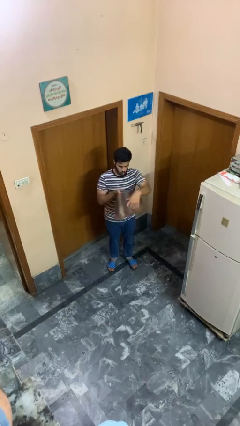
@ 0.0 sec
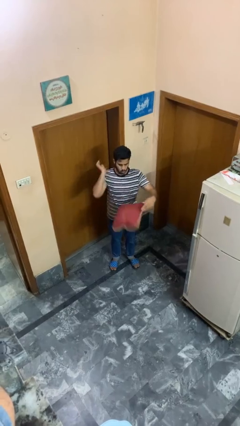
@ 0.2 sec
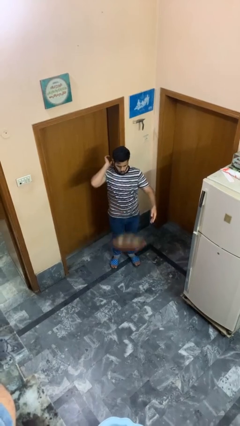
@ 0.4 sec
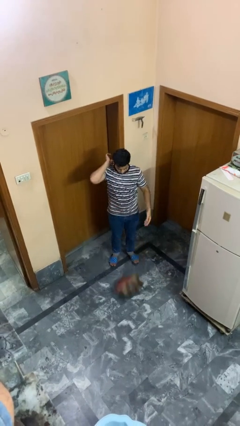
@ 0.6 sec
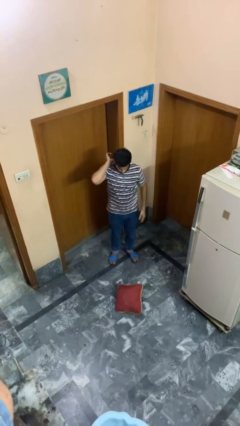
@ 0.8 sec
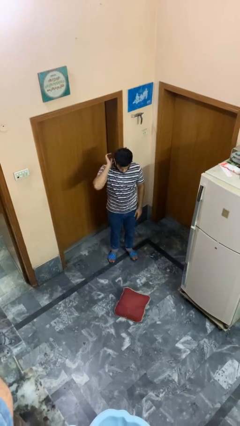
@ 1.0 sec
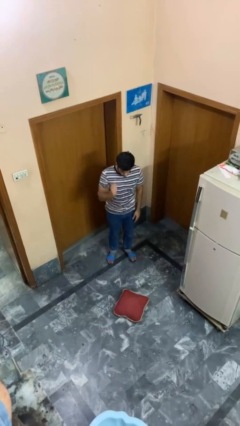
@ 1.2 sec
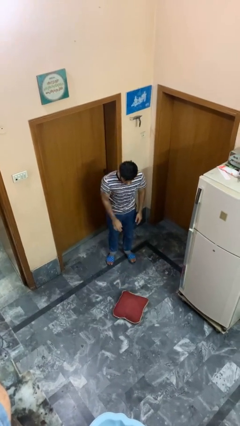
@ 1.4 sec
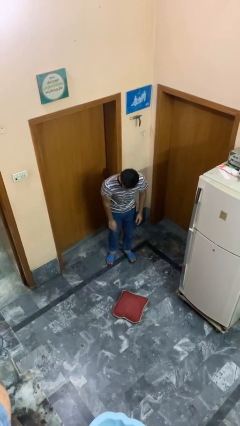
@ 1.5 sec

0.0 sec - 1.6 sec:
person drops object

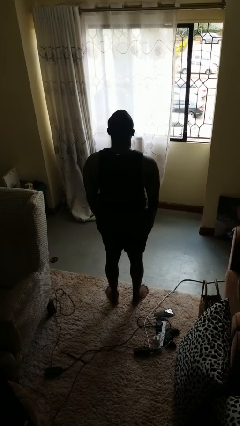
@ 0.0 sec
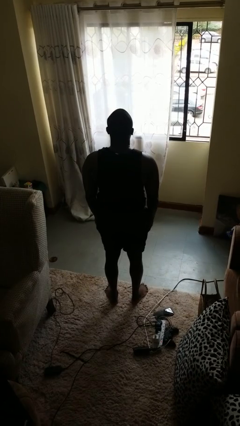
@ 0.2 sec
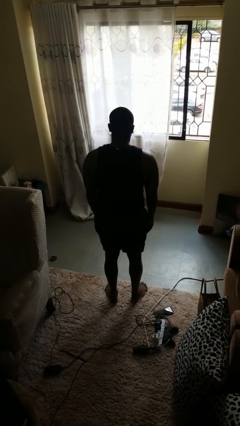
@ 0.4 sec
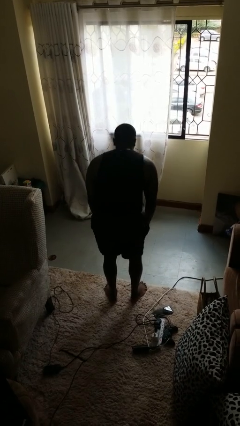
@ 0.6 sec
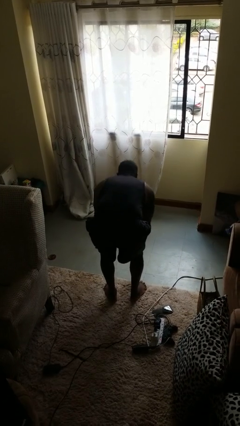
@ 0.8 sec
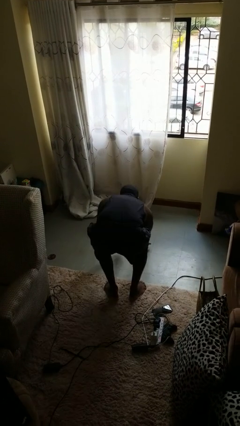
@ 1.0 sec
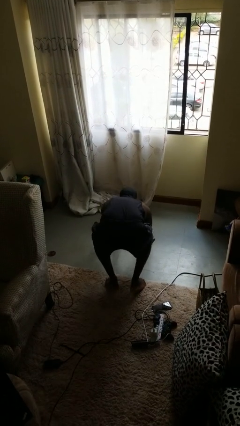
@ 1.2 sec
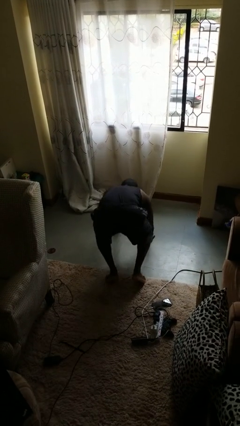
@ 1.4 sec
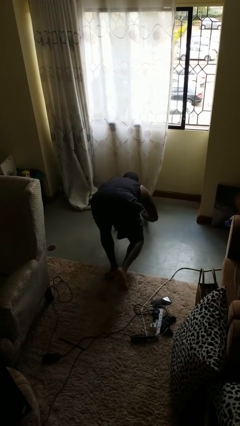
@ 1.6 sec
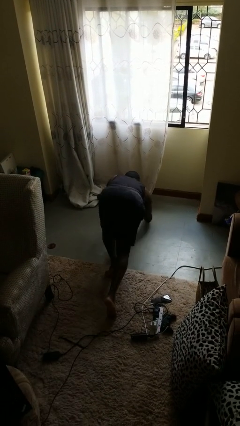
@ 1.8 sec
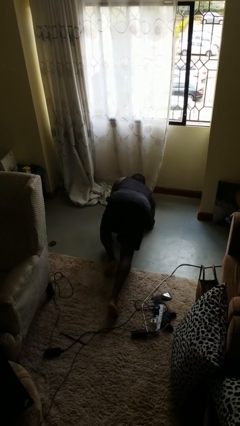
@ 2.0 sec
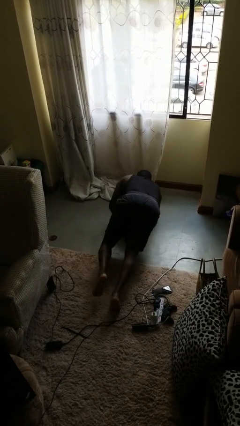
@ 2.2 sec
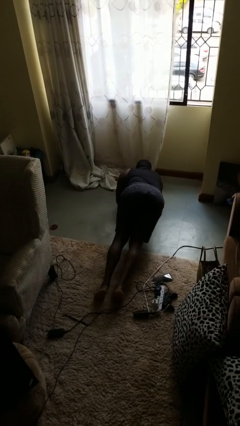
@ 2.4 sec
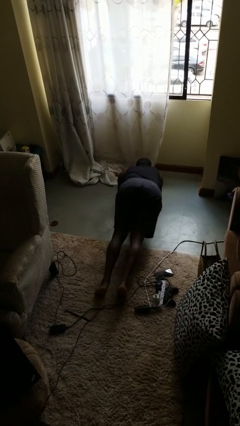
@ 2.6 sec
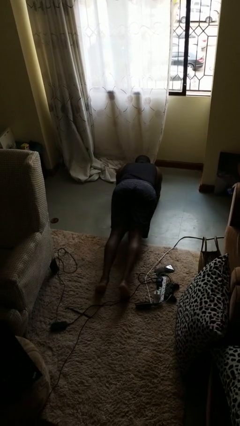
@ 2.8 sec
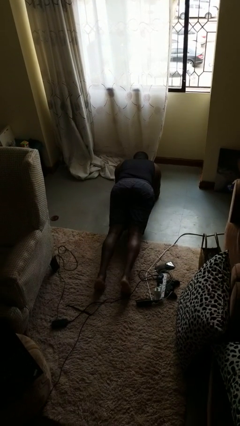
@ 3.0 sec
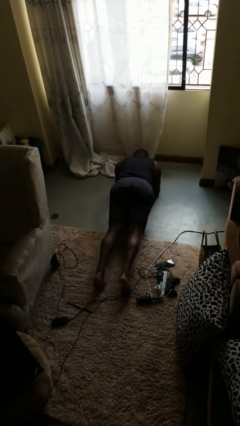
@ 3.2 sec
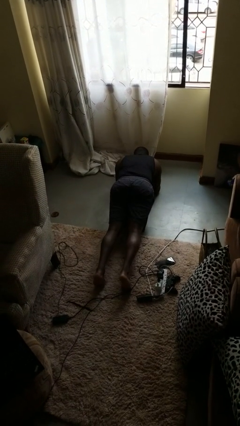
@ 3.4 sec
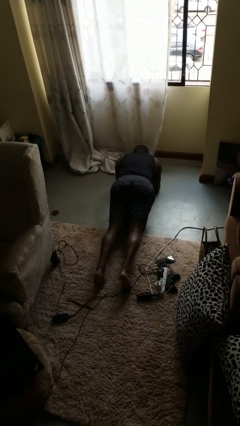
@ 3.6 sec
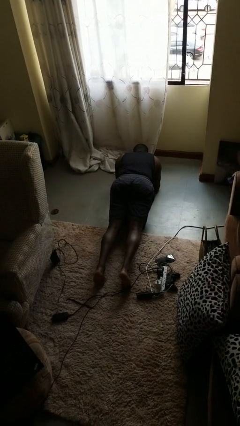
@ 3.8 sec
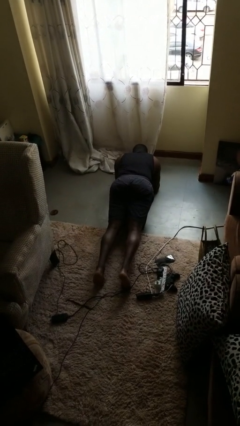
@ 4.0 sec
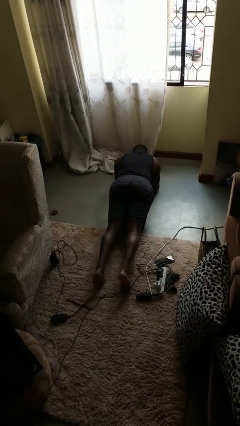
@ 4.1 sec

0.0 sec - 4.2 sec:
person exercises with plank

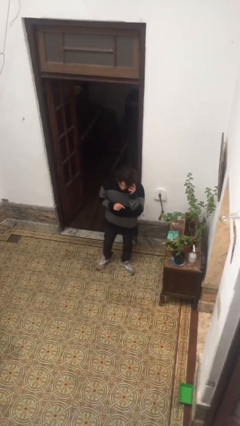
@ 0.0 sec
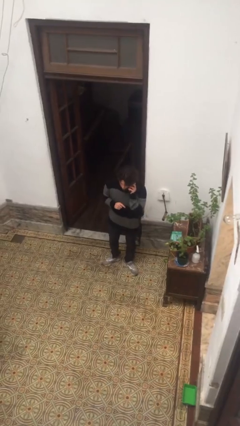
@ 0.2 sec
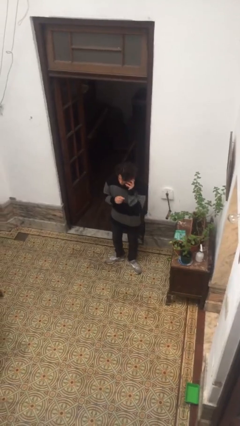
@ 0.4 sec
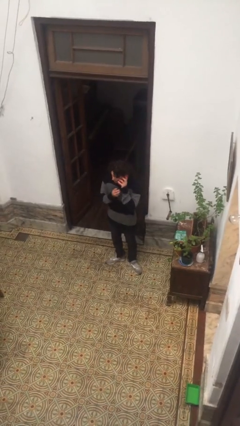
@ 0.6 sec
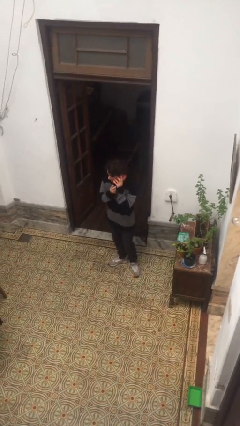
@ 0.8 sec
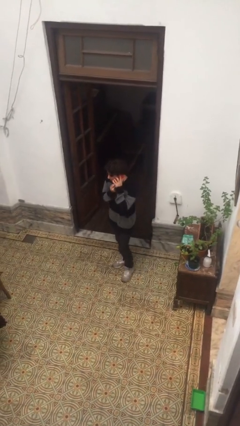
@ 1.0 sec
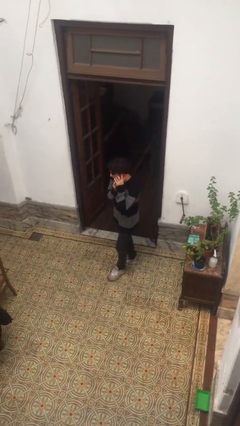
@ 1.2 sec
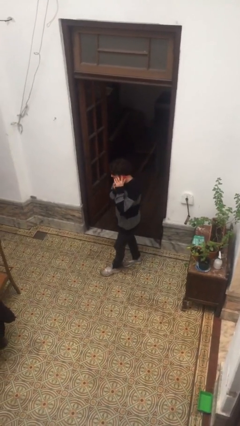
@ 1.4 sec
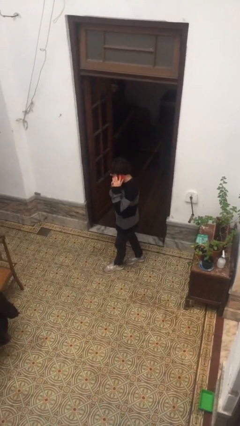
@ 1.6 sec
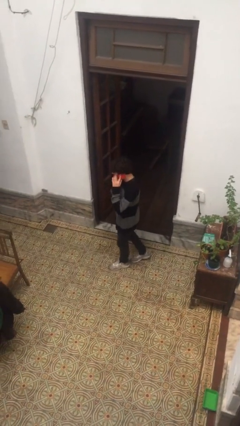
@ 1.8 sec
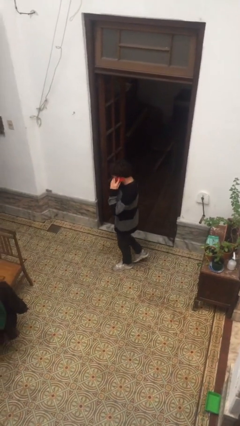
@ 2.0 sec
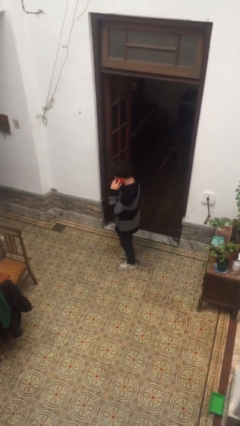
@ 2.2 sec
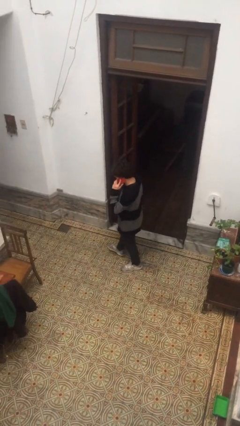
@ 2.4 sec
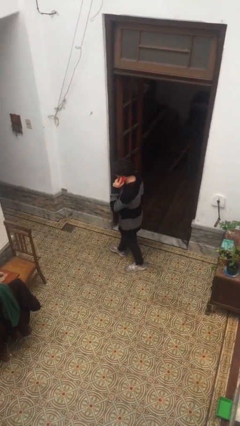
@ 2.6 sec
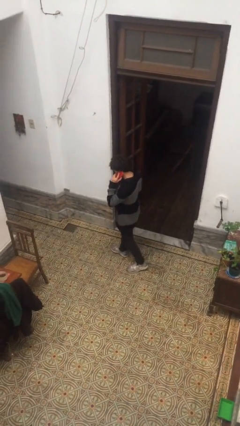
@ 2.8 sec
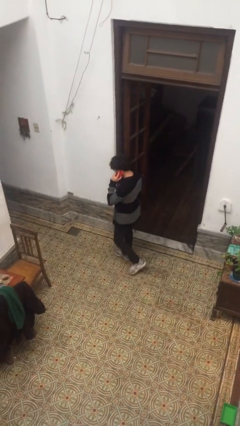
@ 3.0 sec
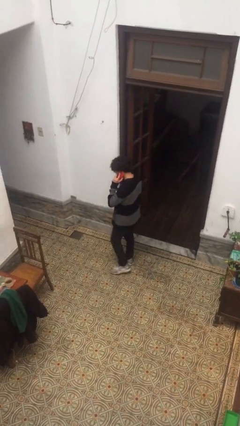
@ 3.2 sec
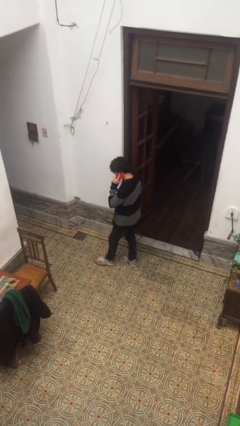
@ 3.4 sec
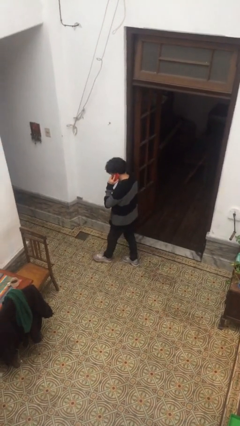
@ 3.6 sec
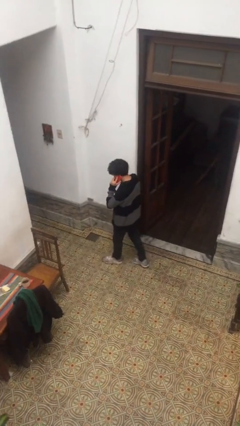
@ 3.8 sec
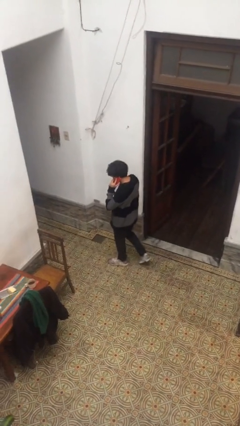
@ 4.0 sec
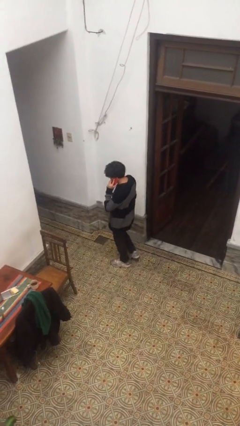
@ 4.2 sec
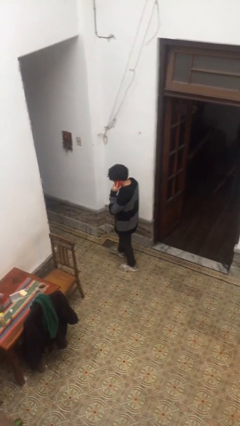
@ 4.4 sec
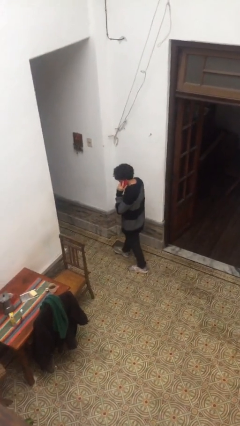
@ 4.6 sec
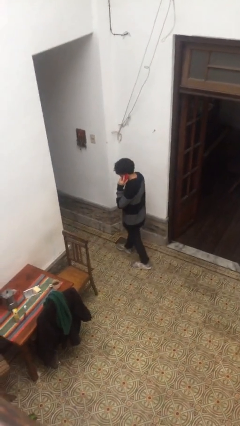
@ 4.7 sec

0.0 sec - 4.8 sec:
person talks on phone

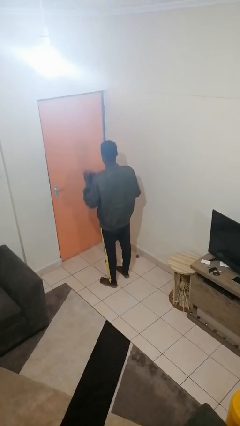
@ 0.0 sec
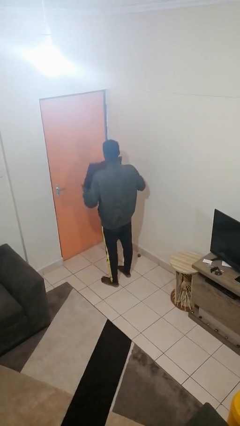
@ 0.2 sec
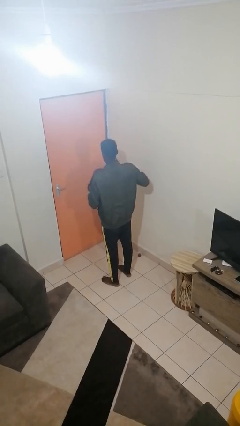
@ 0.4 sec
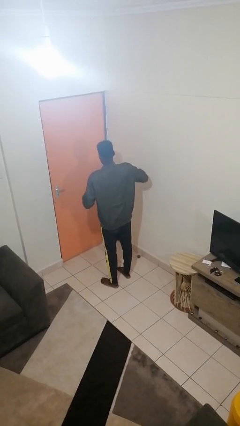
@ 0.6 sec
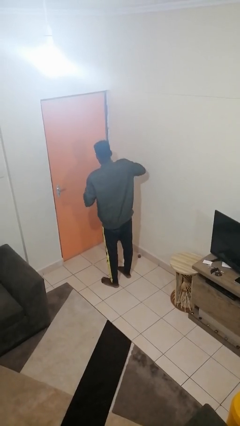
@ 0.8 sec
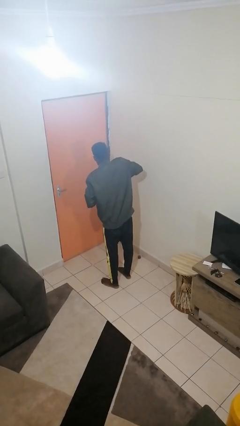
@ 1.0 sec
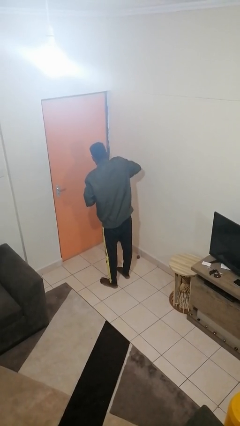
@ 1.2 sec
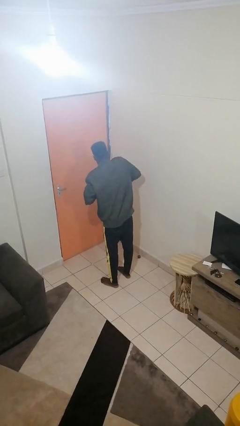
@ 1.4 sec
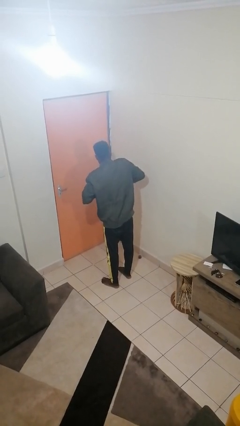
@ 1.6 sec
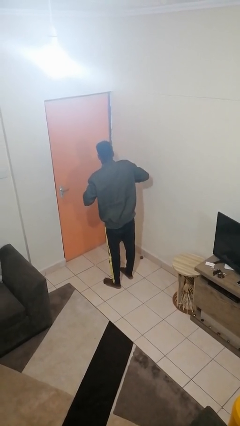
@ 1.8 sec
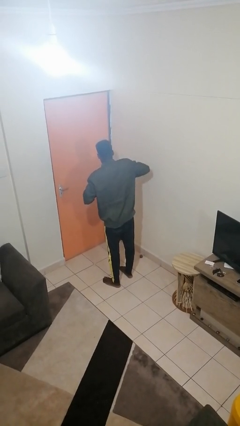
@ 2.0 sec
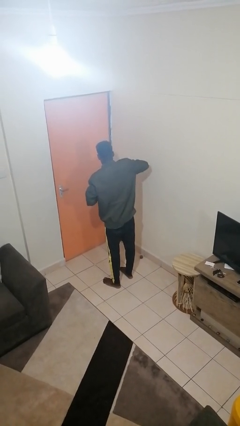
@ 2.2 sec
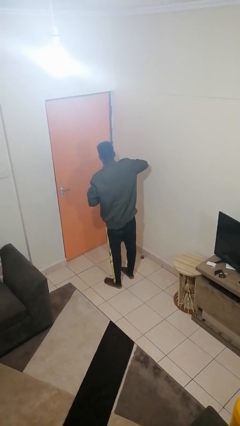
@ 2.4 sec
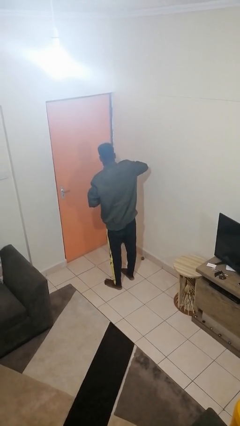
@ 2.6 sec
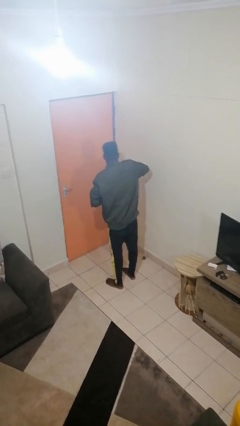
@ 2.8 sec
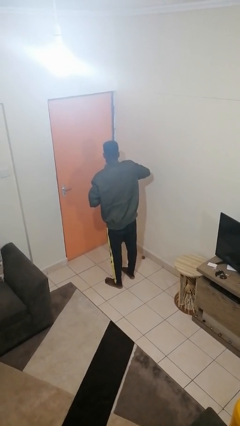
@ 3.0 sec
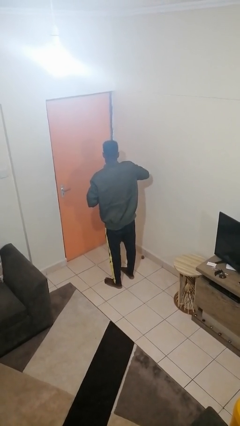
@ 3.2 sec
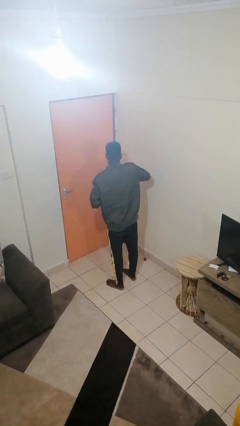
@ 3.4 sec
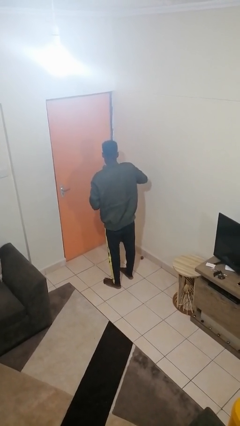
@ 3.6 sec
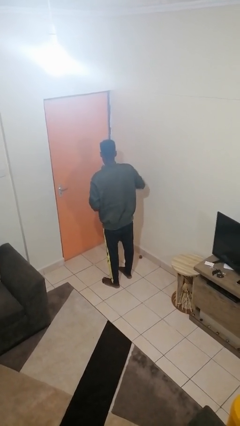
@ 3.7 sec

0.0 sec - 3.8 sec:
person squeezes object

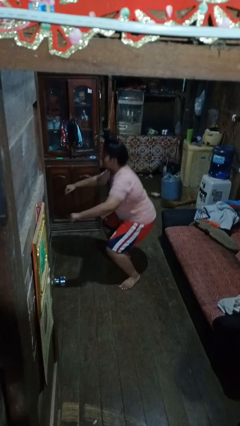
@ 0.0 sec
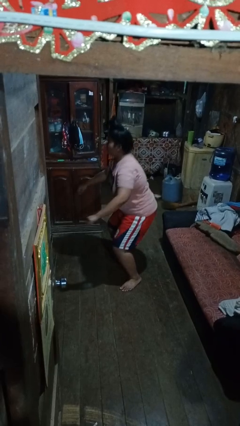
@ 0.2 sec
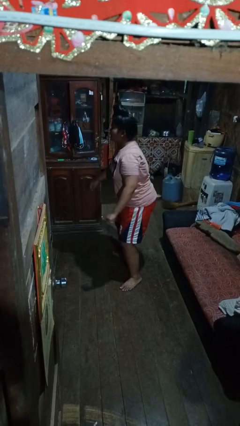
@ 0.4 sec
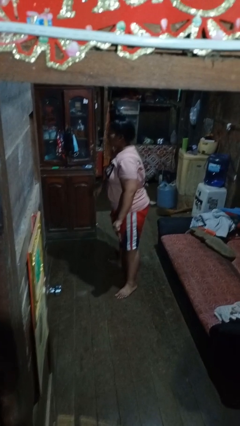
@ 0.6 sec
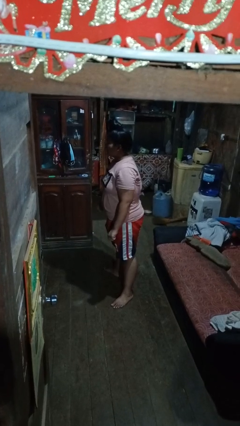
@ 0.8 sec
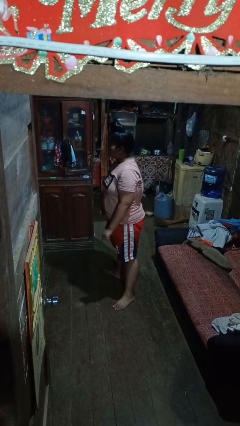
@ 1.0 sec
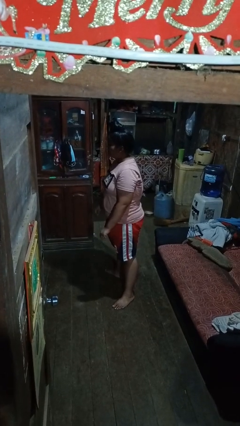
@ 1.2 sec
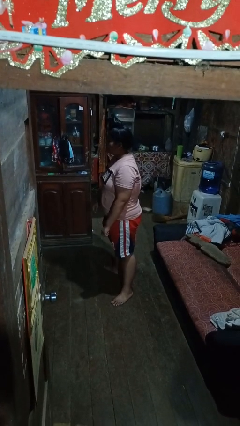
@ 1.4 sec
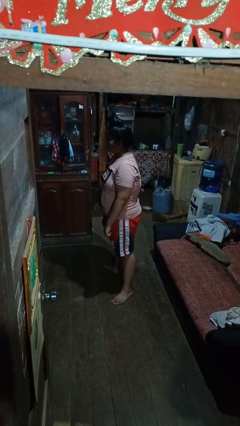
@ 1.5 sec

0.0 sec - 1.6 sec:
person stands up

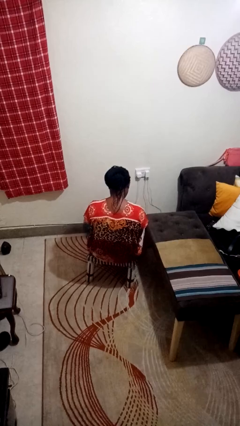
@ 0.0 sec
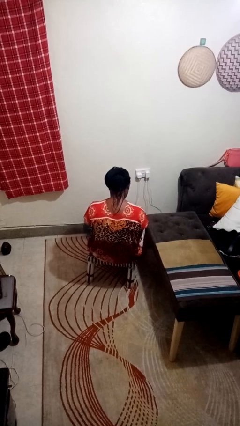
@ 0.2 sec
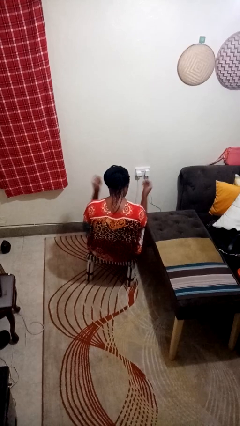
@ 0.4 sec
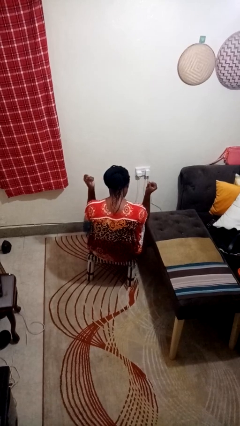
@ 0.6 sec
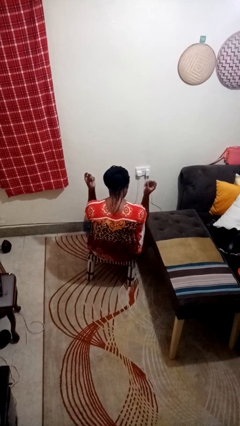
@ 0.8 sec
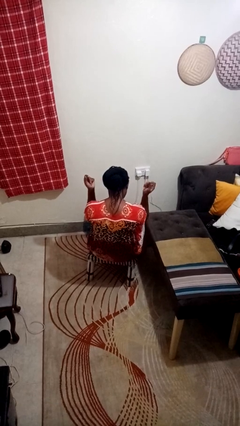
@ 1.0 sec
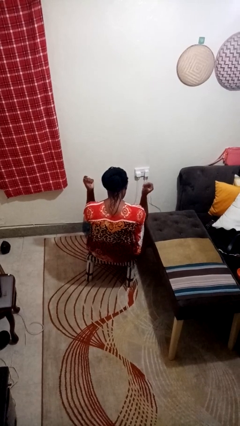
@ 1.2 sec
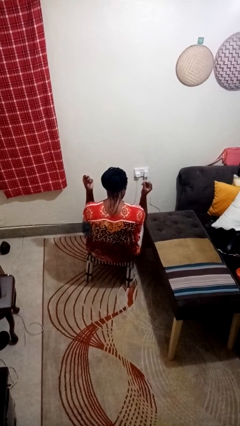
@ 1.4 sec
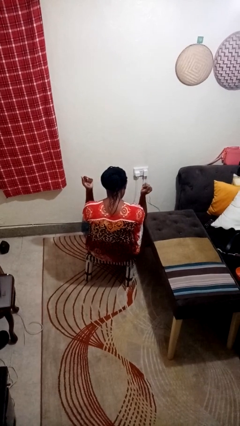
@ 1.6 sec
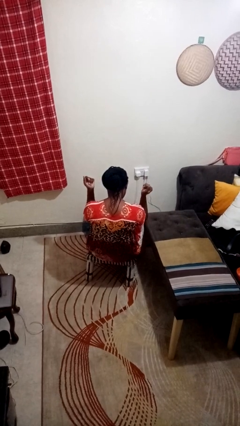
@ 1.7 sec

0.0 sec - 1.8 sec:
person snaps fingers
